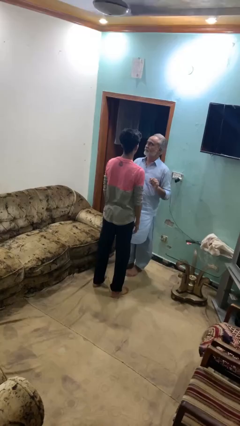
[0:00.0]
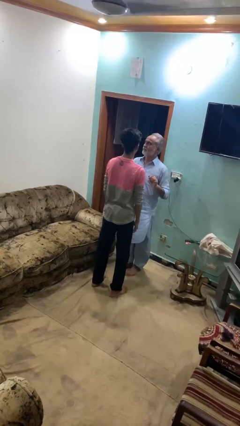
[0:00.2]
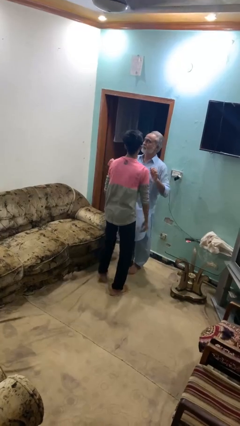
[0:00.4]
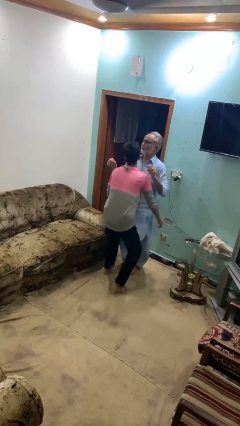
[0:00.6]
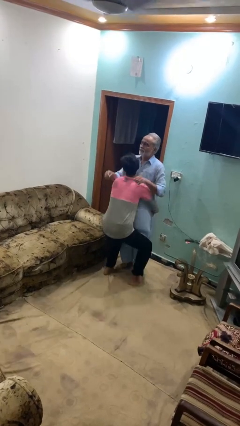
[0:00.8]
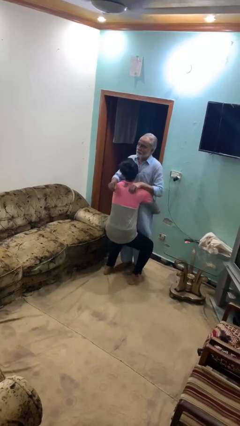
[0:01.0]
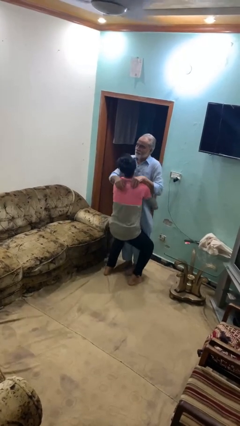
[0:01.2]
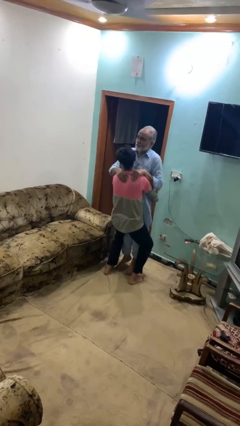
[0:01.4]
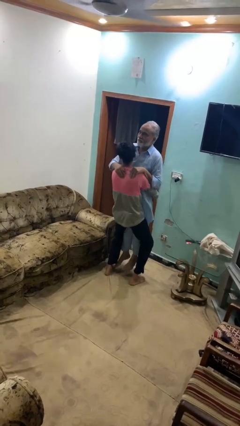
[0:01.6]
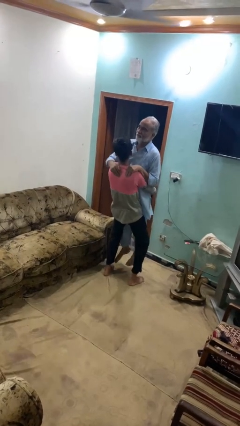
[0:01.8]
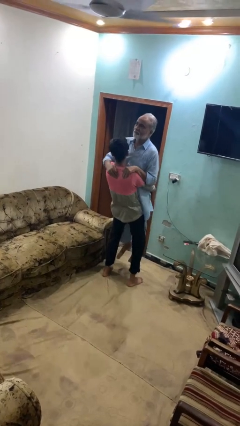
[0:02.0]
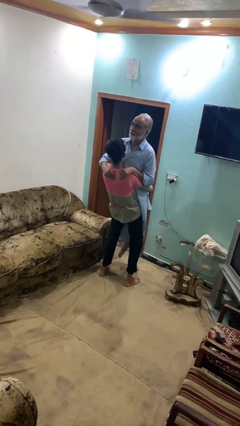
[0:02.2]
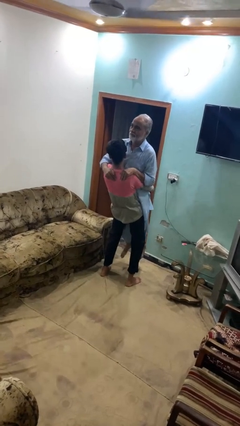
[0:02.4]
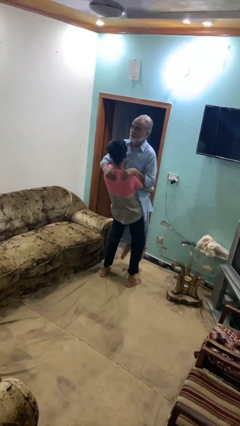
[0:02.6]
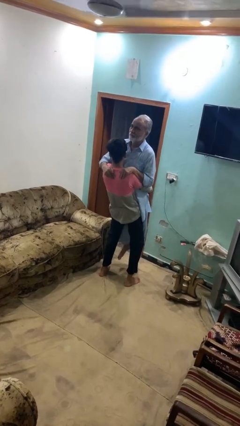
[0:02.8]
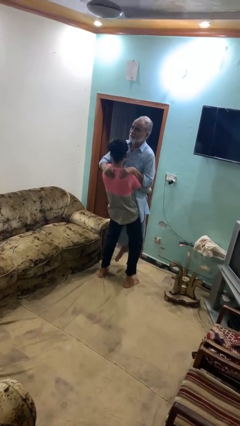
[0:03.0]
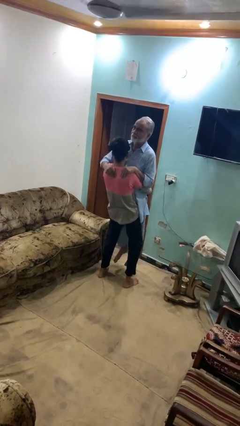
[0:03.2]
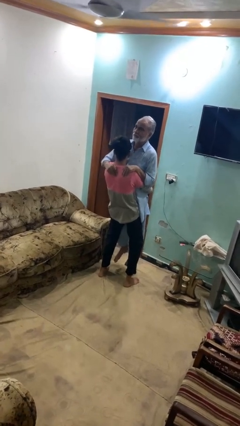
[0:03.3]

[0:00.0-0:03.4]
person picks up person

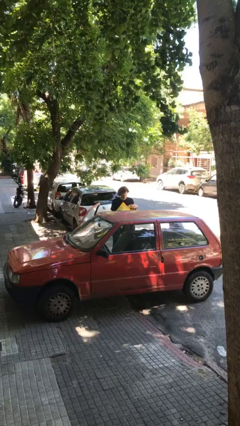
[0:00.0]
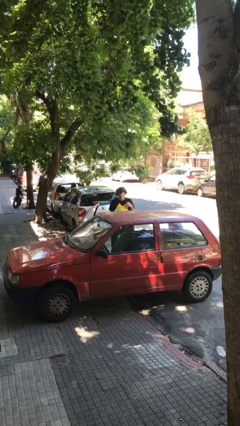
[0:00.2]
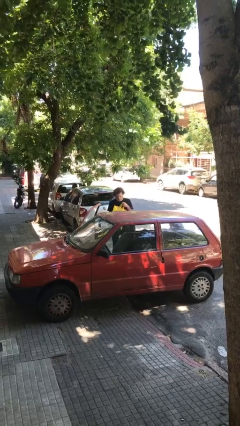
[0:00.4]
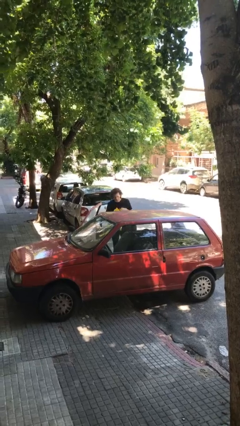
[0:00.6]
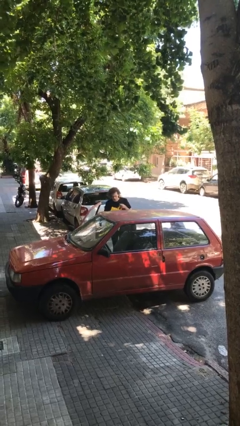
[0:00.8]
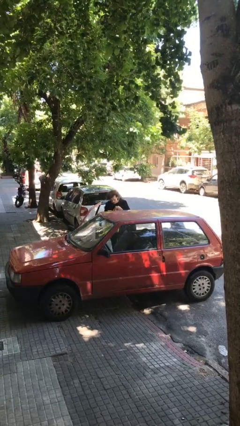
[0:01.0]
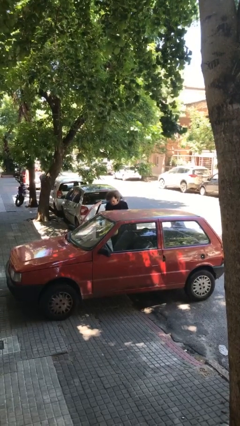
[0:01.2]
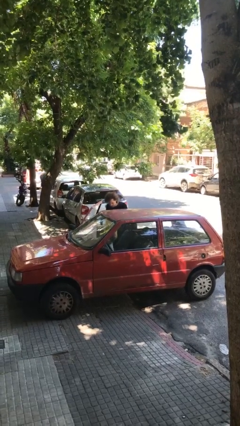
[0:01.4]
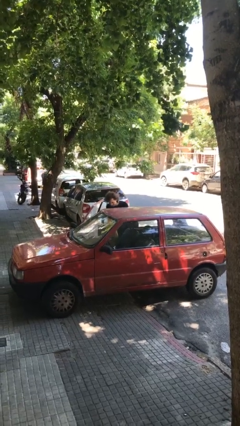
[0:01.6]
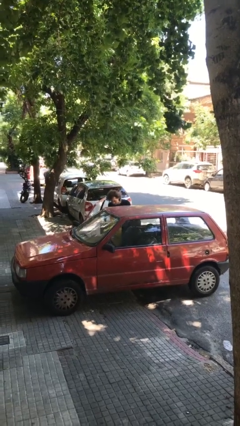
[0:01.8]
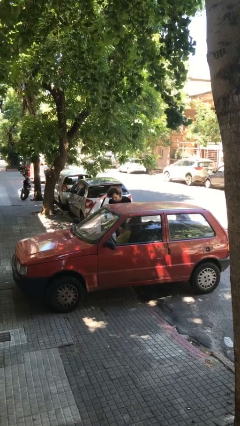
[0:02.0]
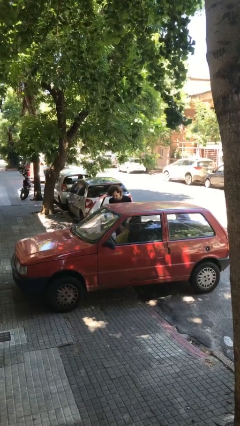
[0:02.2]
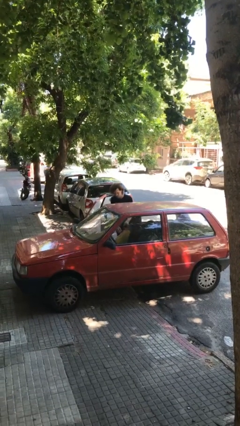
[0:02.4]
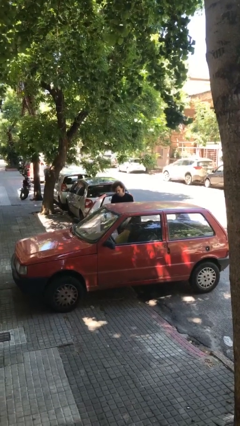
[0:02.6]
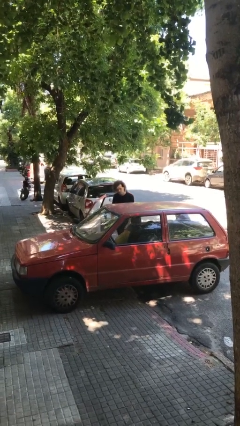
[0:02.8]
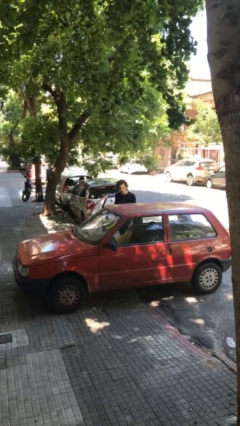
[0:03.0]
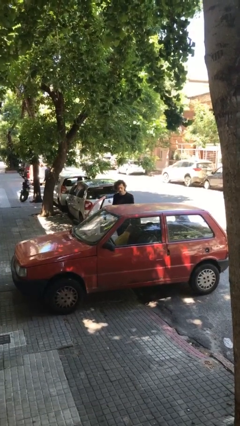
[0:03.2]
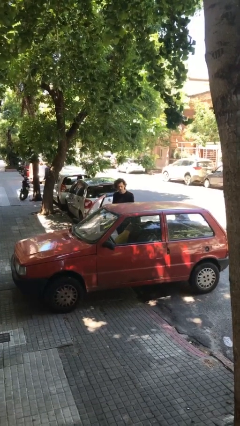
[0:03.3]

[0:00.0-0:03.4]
person loads car

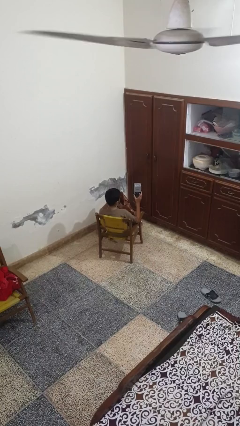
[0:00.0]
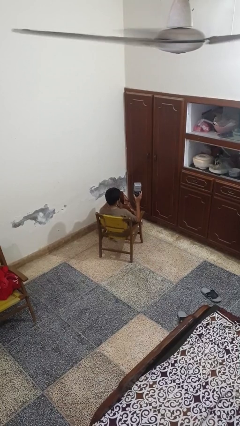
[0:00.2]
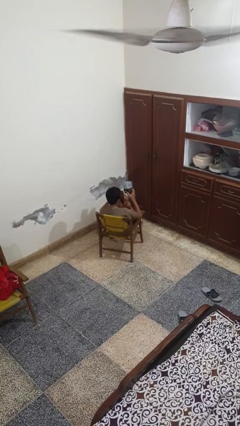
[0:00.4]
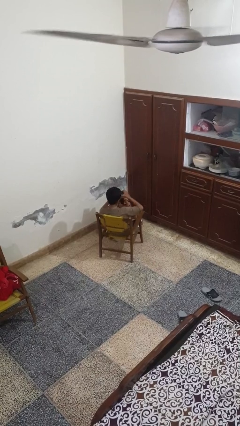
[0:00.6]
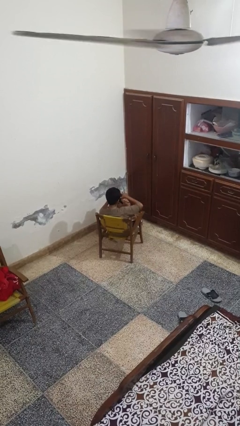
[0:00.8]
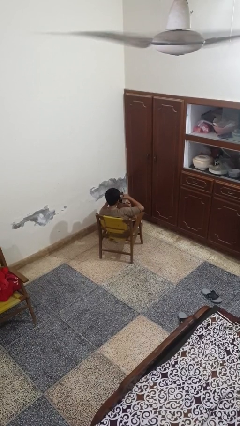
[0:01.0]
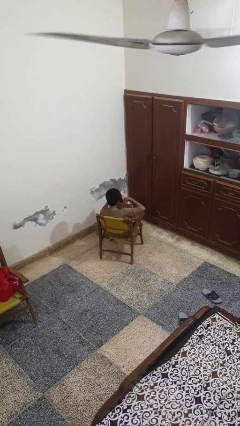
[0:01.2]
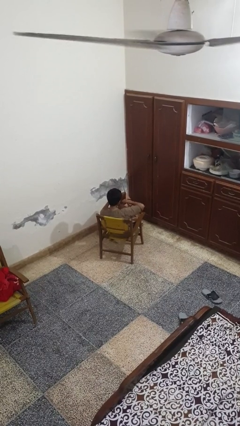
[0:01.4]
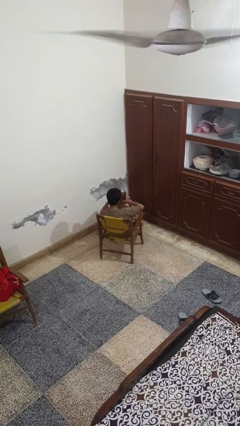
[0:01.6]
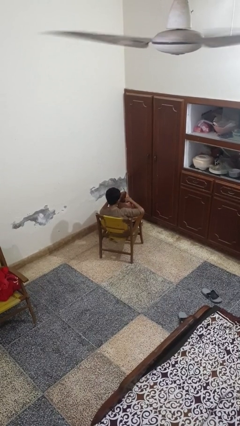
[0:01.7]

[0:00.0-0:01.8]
person puts object into bag

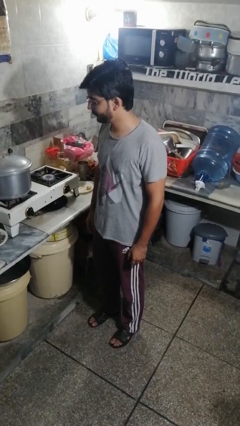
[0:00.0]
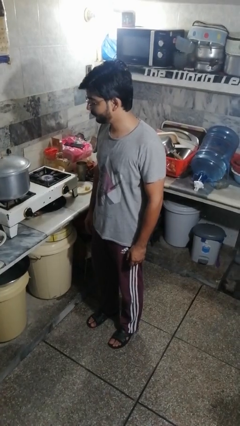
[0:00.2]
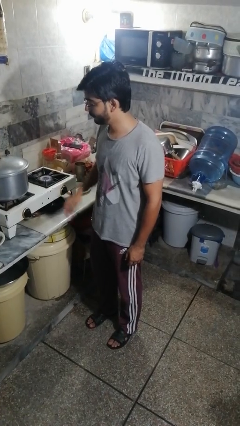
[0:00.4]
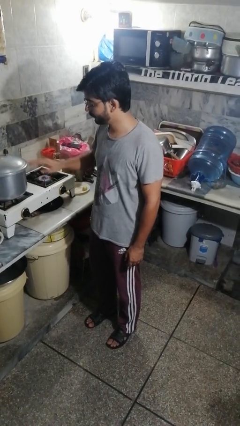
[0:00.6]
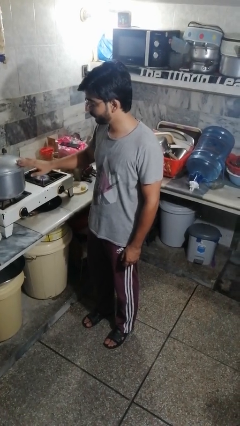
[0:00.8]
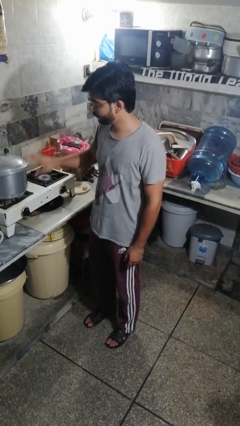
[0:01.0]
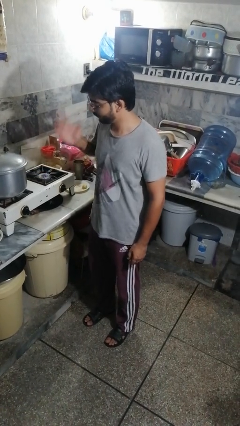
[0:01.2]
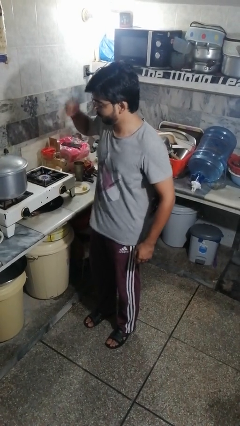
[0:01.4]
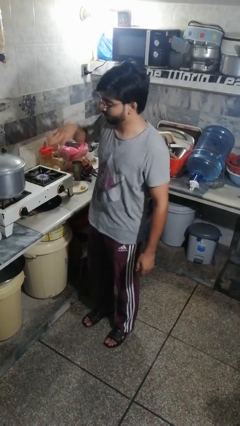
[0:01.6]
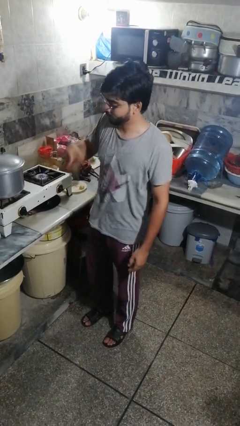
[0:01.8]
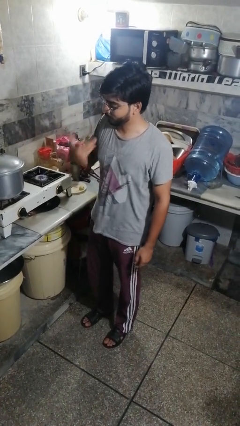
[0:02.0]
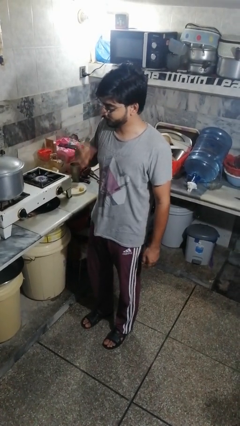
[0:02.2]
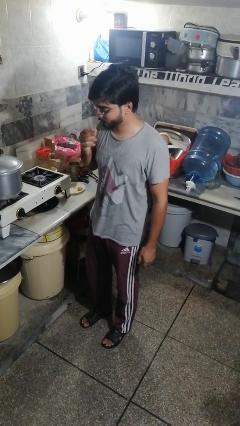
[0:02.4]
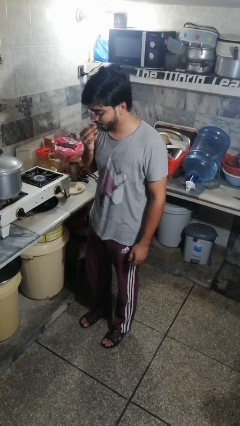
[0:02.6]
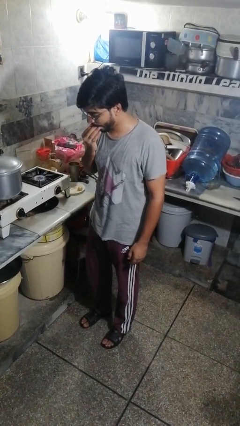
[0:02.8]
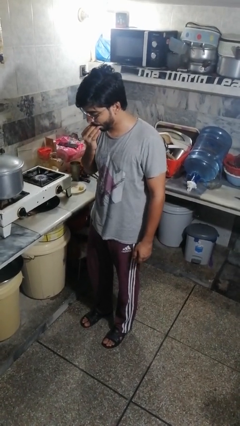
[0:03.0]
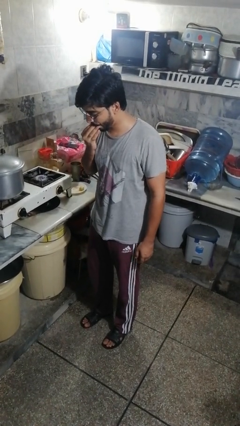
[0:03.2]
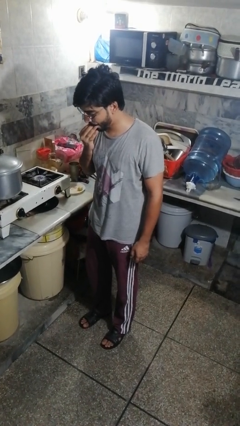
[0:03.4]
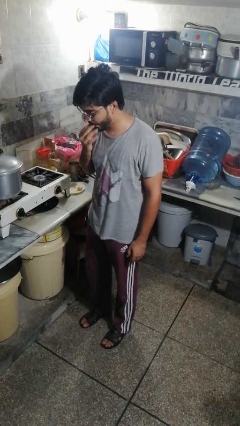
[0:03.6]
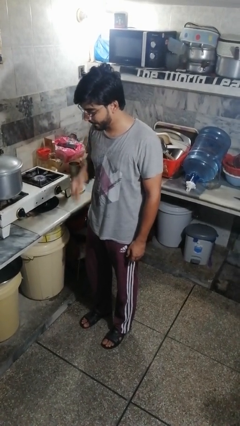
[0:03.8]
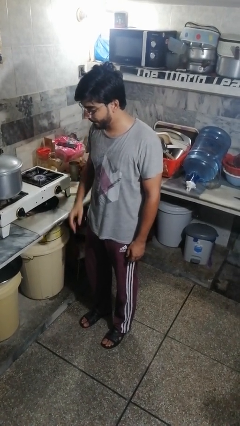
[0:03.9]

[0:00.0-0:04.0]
person burns hand

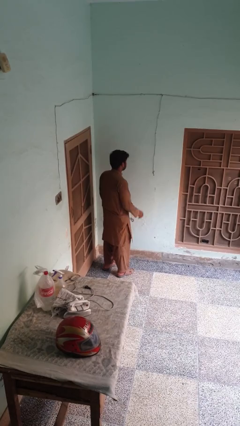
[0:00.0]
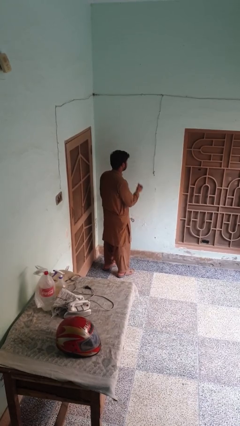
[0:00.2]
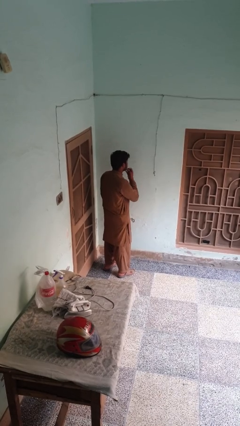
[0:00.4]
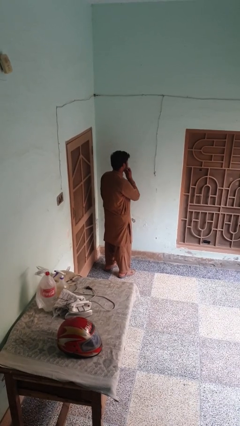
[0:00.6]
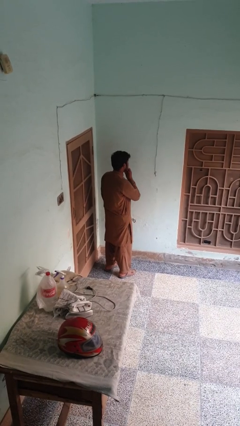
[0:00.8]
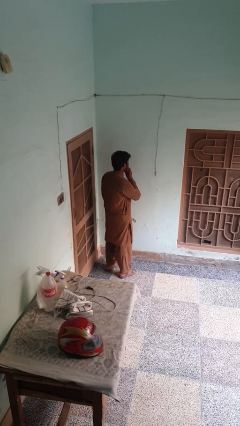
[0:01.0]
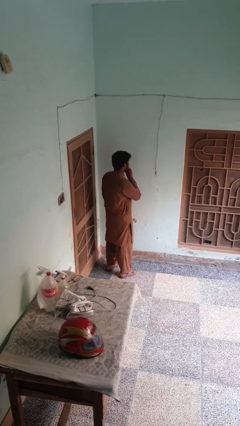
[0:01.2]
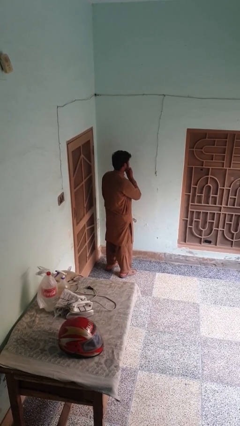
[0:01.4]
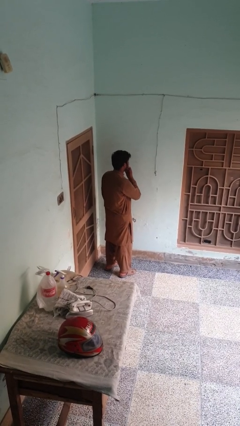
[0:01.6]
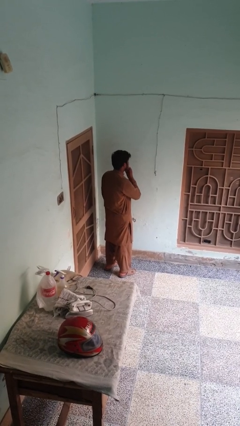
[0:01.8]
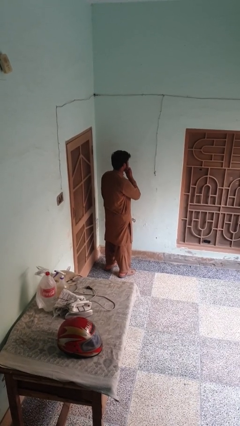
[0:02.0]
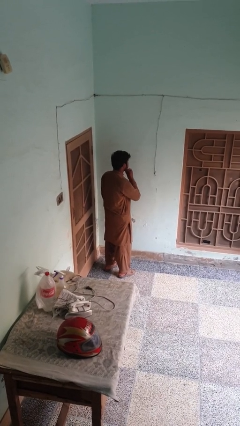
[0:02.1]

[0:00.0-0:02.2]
person strokes chin

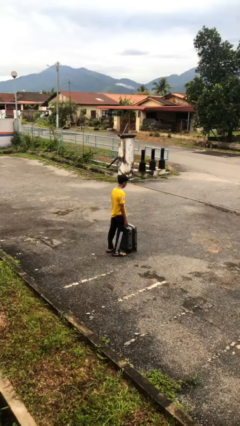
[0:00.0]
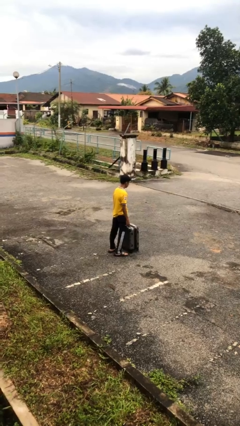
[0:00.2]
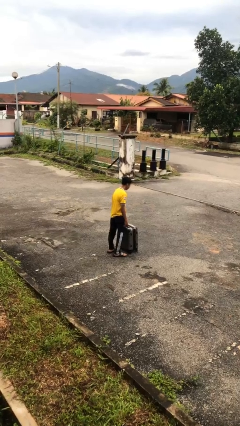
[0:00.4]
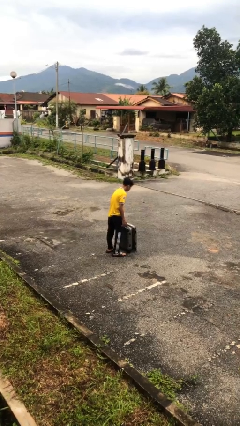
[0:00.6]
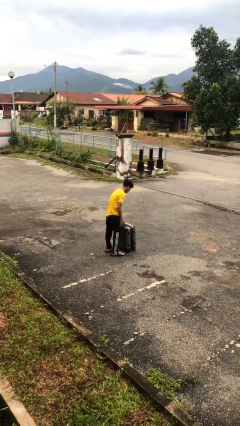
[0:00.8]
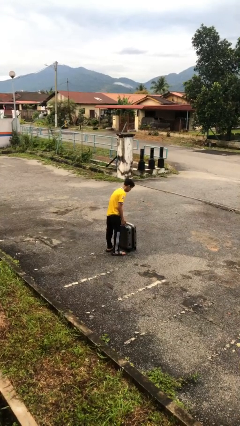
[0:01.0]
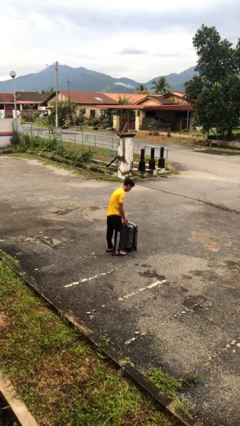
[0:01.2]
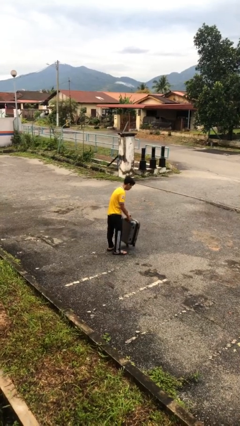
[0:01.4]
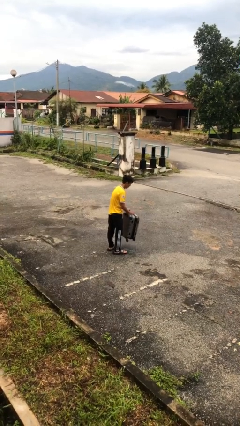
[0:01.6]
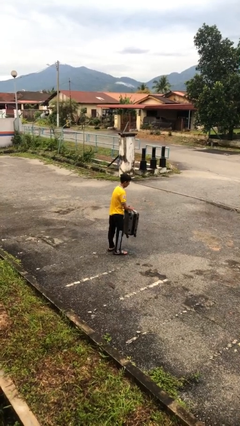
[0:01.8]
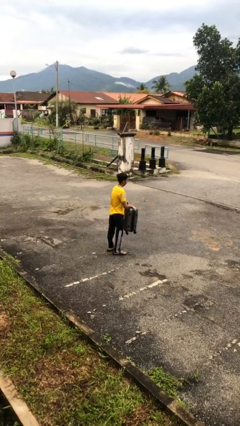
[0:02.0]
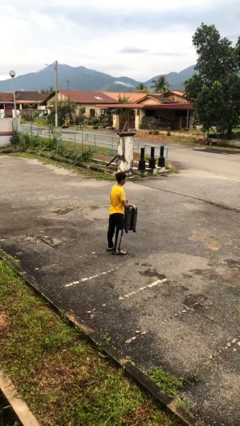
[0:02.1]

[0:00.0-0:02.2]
person picks up object from floor

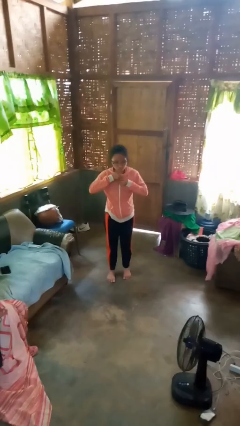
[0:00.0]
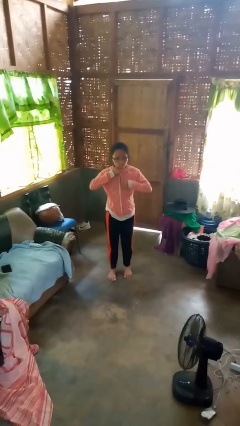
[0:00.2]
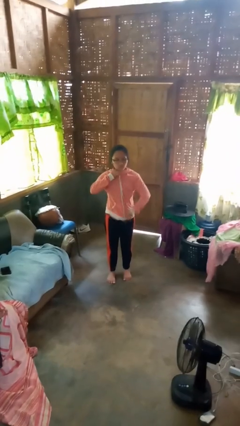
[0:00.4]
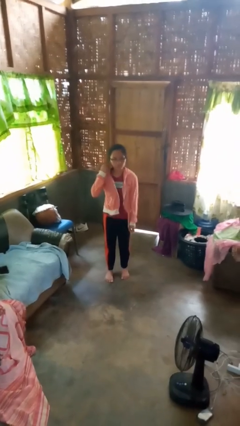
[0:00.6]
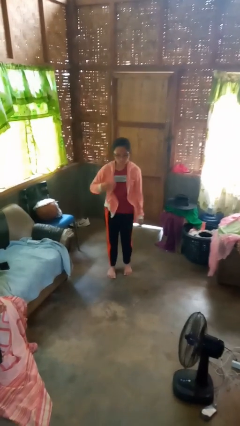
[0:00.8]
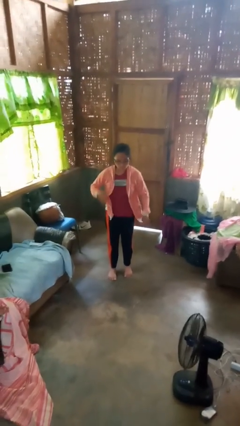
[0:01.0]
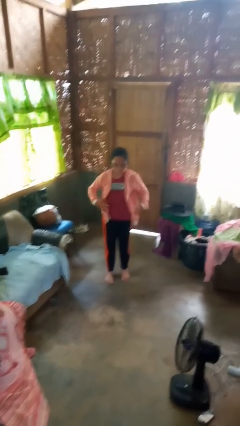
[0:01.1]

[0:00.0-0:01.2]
person unzips jacket
